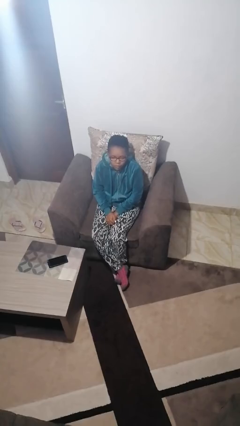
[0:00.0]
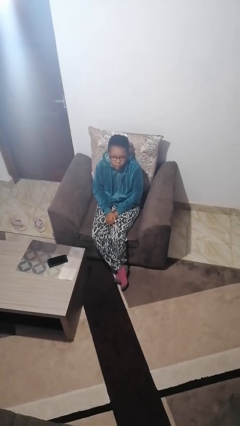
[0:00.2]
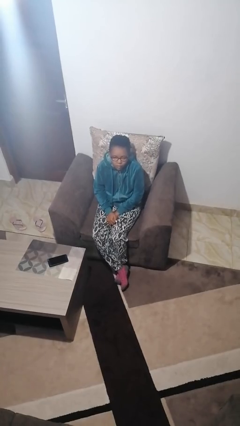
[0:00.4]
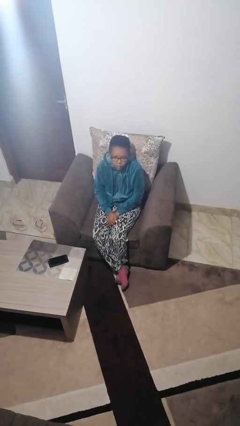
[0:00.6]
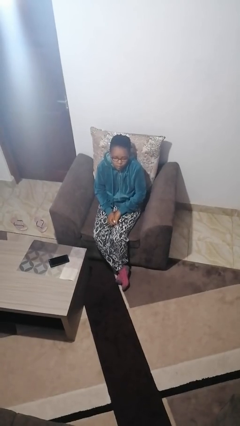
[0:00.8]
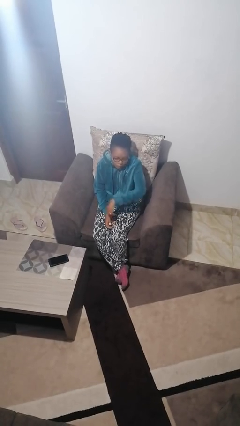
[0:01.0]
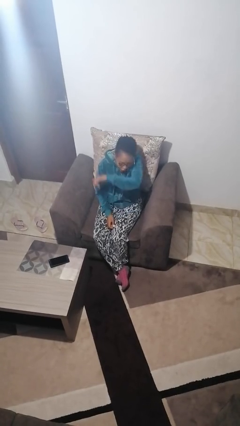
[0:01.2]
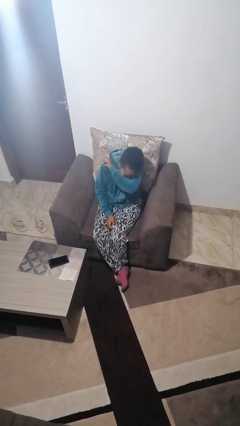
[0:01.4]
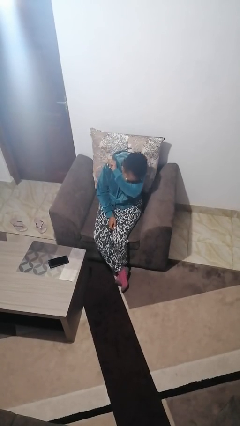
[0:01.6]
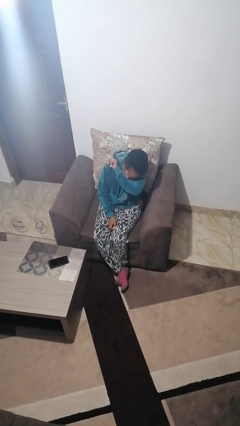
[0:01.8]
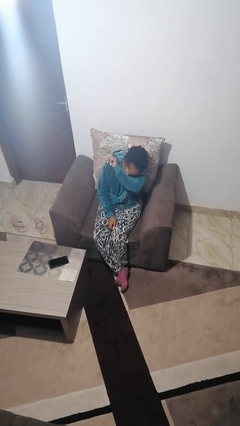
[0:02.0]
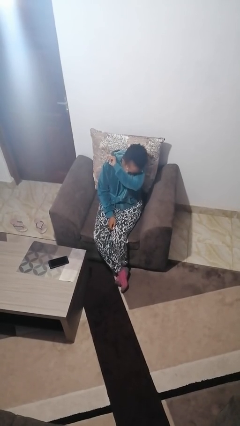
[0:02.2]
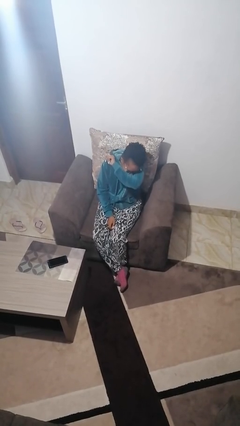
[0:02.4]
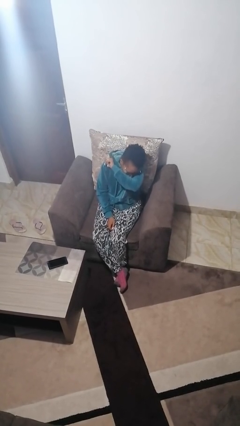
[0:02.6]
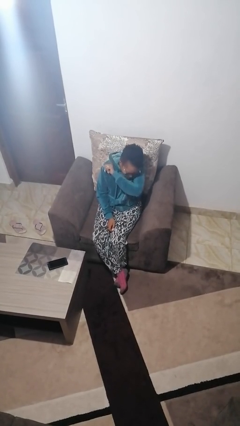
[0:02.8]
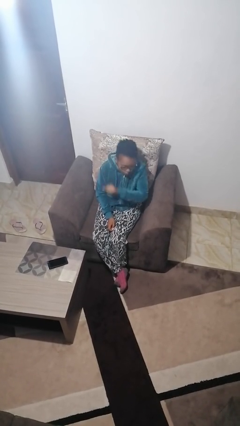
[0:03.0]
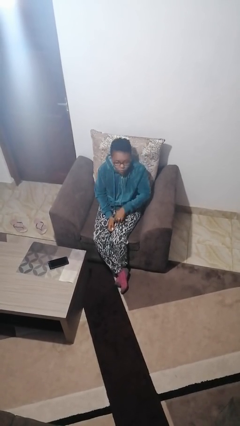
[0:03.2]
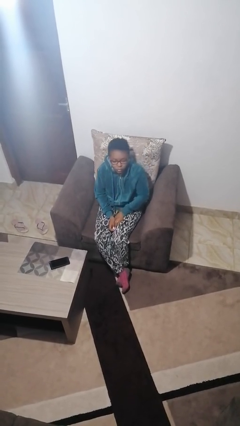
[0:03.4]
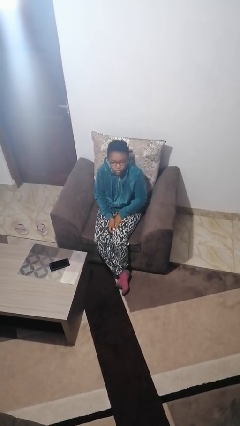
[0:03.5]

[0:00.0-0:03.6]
person sneezes into arm

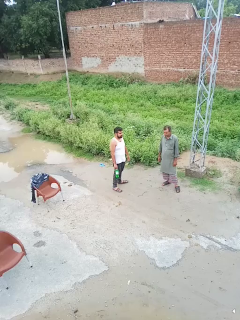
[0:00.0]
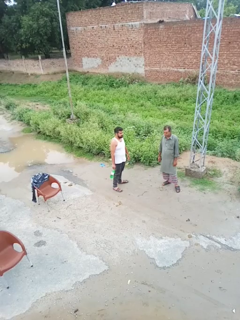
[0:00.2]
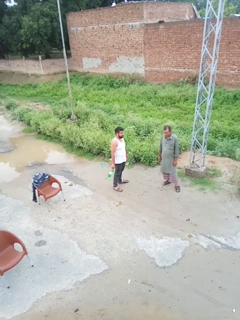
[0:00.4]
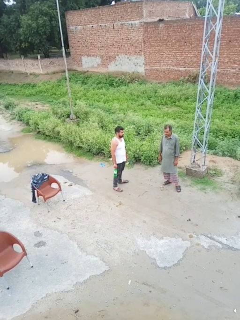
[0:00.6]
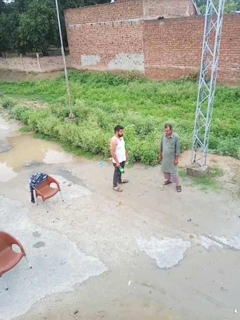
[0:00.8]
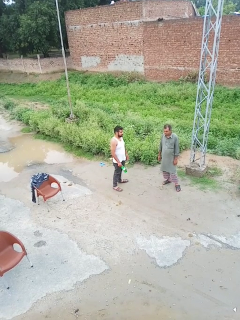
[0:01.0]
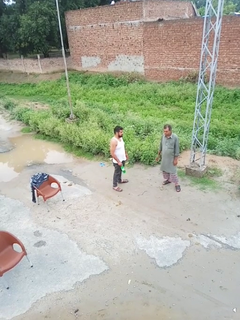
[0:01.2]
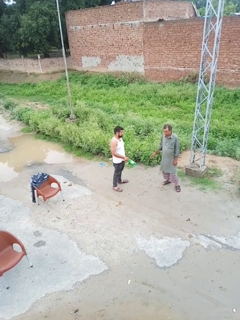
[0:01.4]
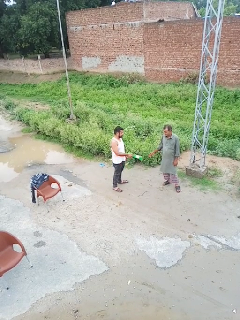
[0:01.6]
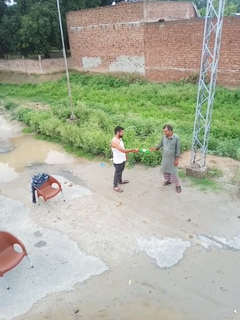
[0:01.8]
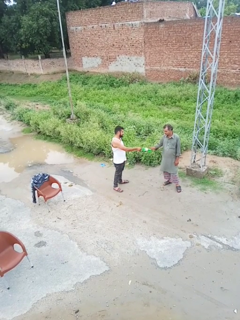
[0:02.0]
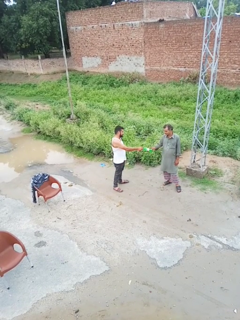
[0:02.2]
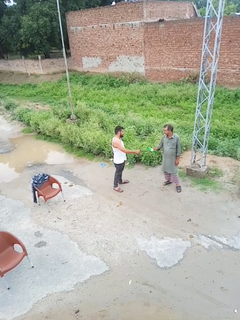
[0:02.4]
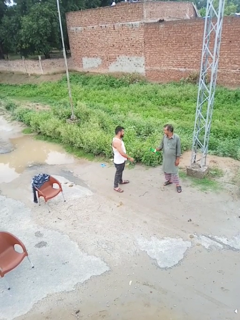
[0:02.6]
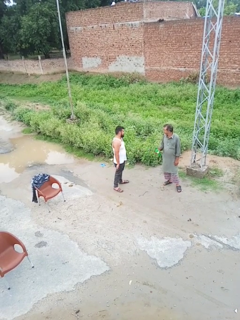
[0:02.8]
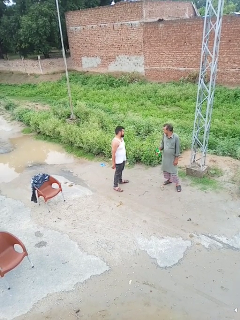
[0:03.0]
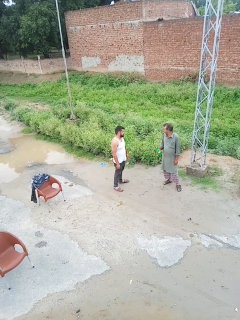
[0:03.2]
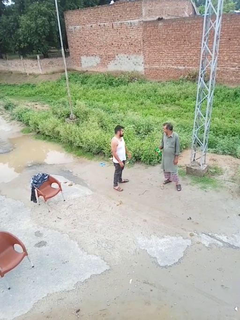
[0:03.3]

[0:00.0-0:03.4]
person transfers object to person

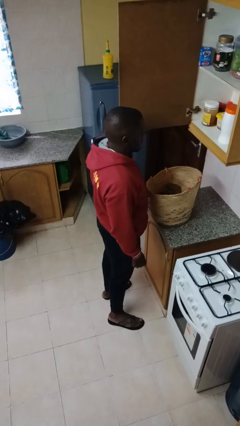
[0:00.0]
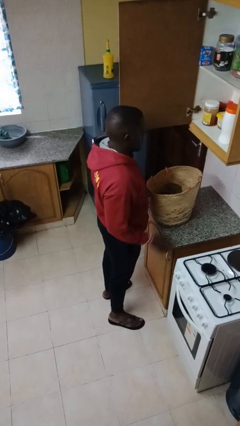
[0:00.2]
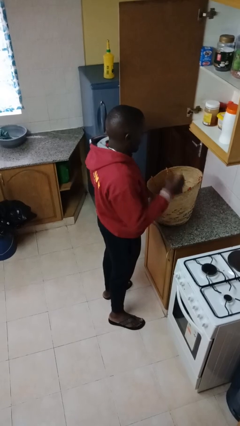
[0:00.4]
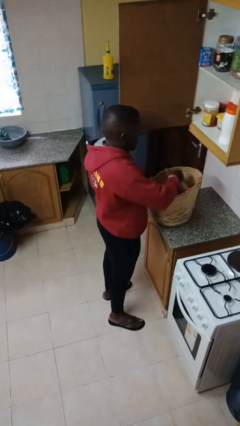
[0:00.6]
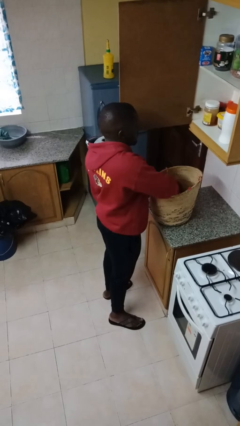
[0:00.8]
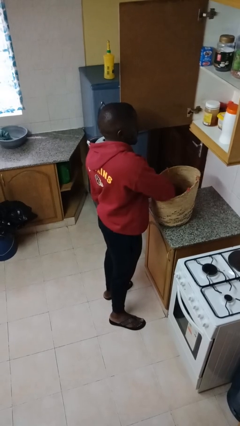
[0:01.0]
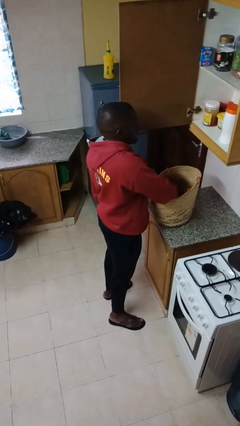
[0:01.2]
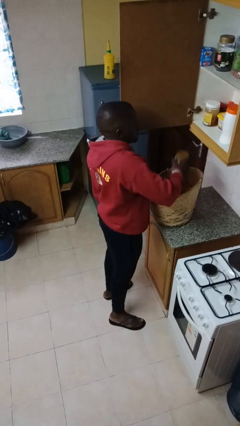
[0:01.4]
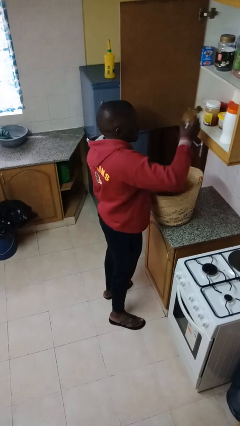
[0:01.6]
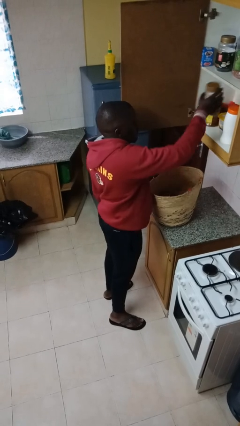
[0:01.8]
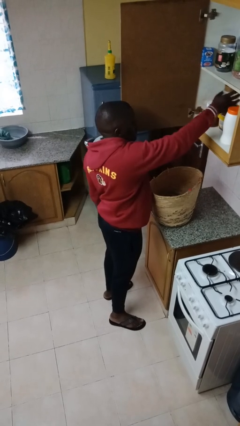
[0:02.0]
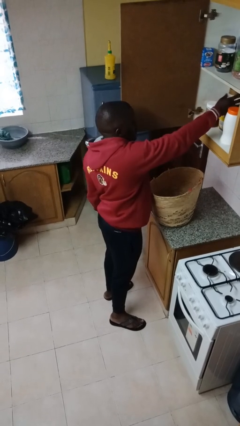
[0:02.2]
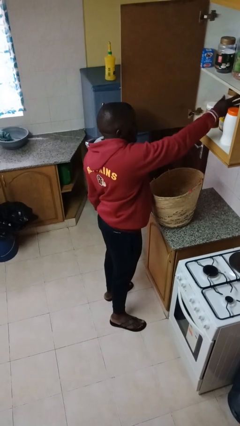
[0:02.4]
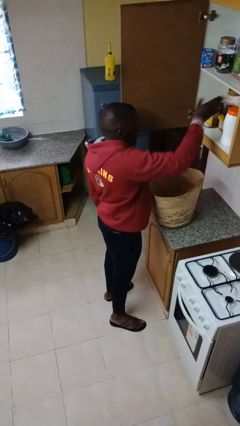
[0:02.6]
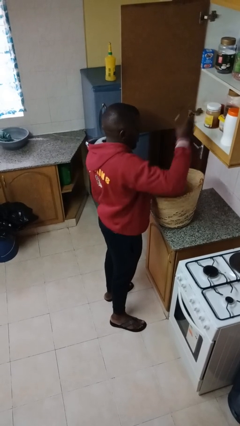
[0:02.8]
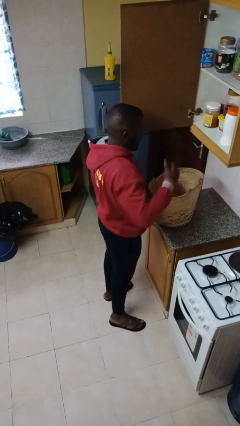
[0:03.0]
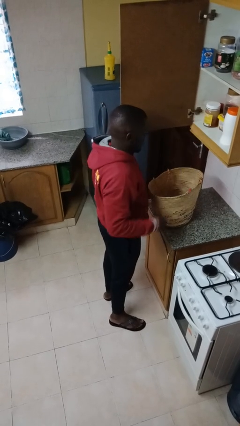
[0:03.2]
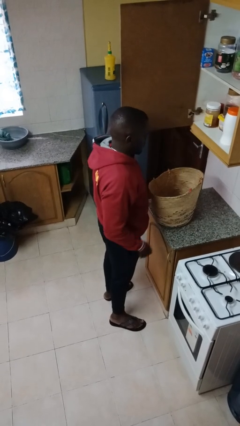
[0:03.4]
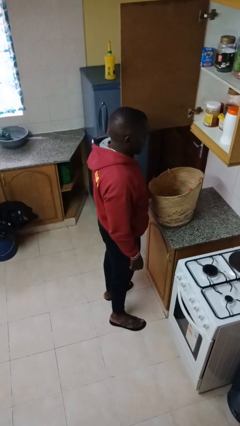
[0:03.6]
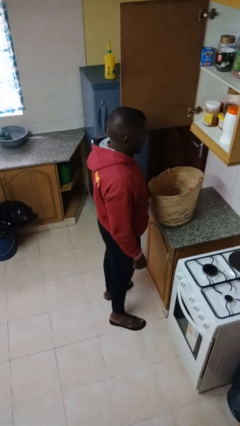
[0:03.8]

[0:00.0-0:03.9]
person loads groceries into cabinet

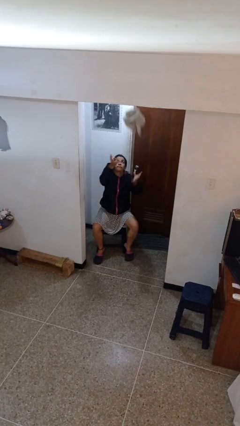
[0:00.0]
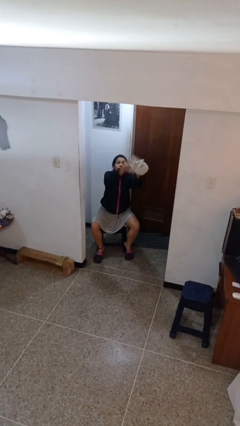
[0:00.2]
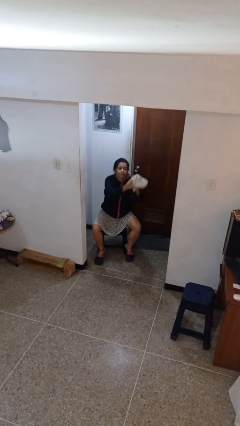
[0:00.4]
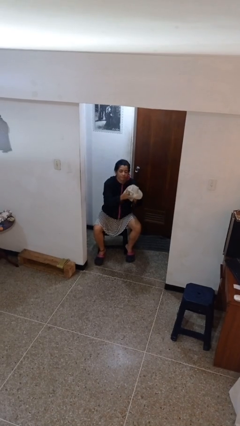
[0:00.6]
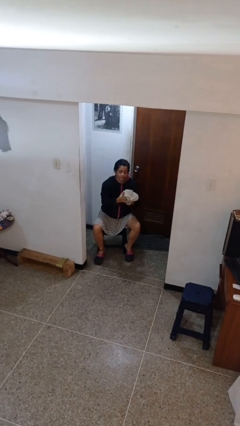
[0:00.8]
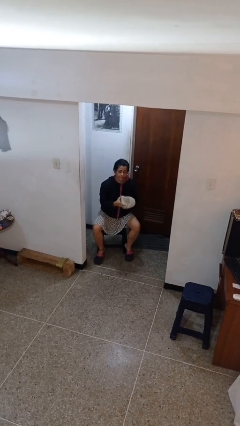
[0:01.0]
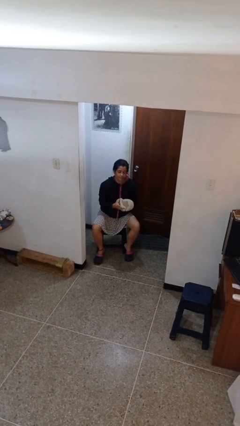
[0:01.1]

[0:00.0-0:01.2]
person catches dropped object

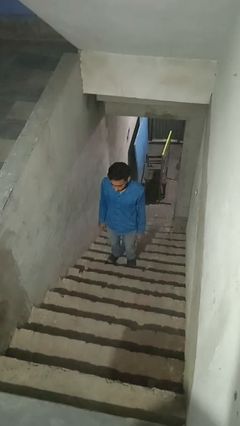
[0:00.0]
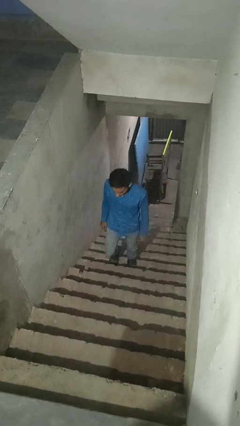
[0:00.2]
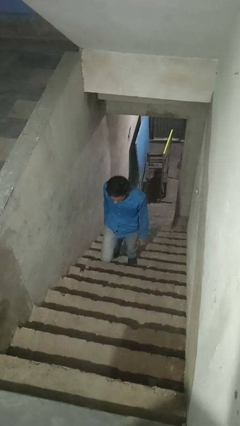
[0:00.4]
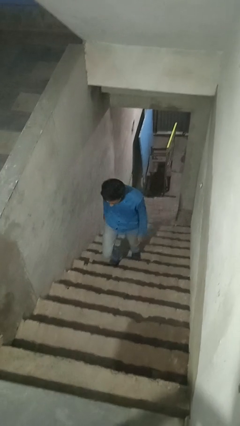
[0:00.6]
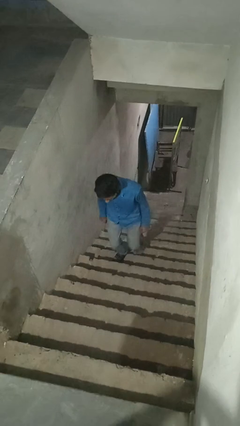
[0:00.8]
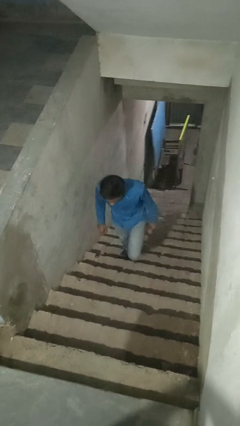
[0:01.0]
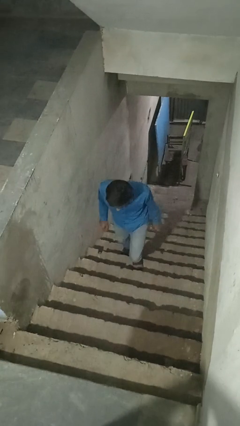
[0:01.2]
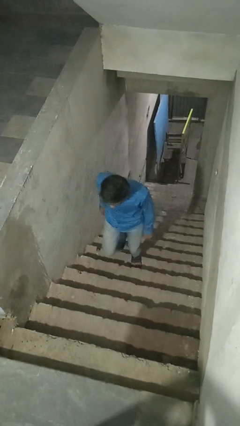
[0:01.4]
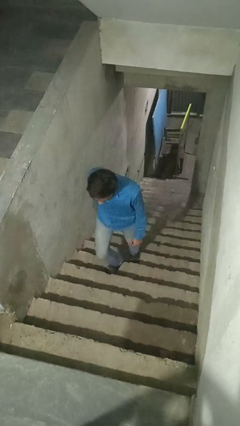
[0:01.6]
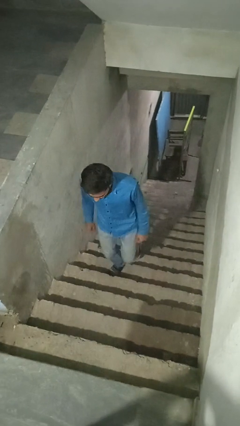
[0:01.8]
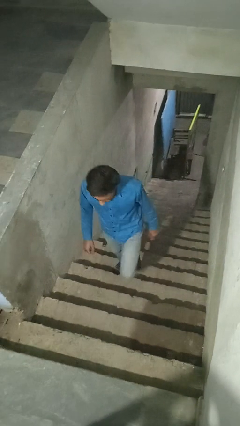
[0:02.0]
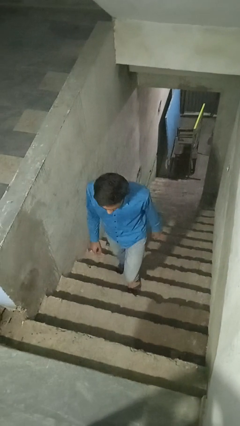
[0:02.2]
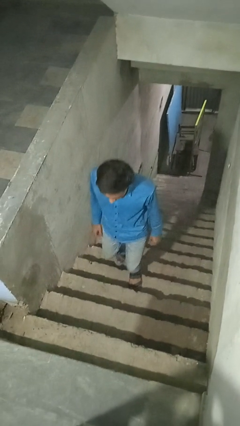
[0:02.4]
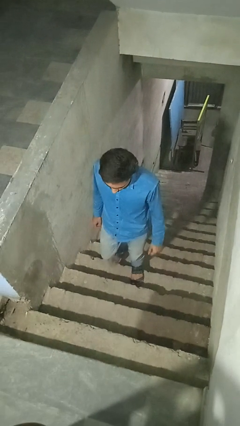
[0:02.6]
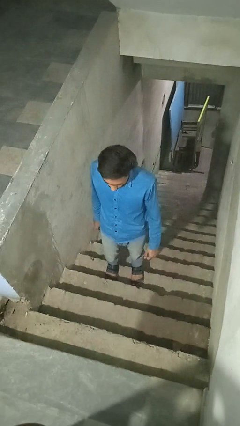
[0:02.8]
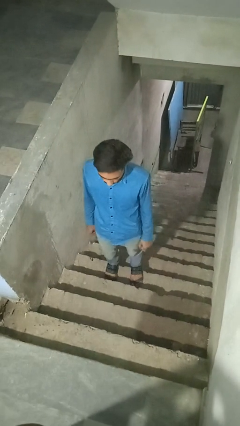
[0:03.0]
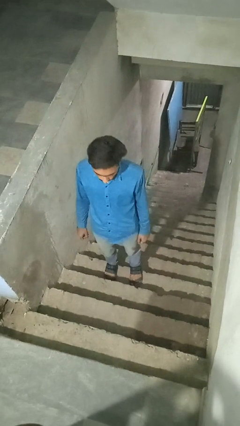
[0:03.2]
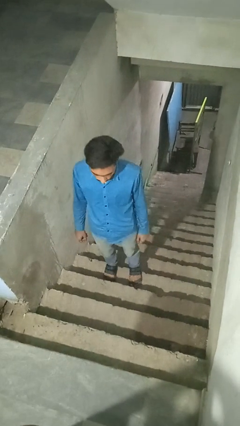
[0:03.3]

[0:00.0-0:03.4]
person climbs up stairs

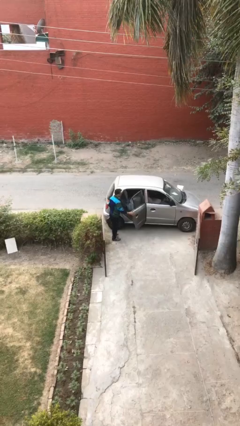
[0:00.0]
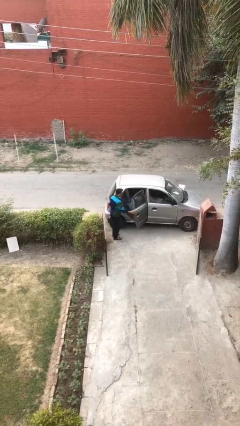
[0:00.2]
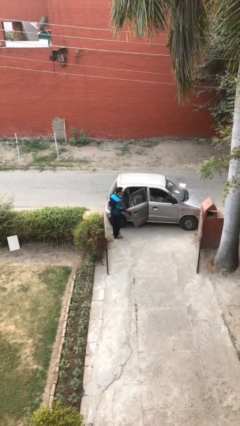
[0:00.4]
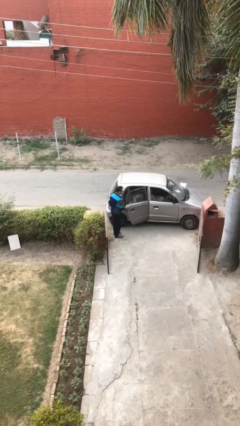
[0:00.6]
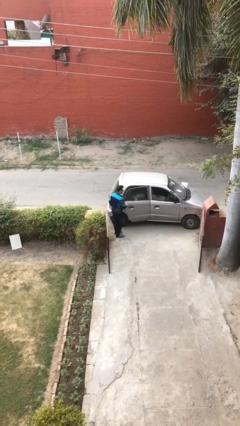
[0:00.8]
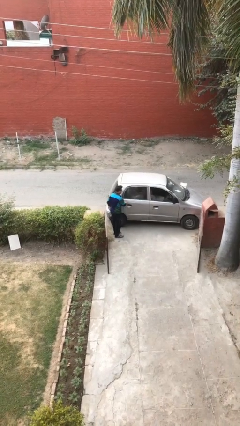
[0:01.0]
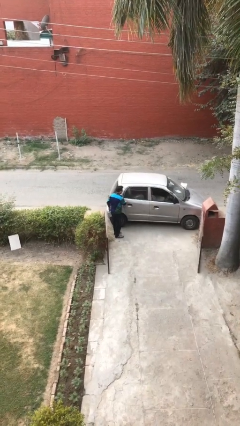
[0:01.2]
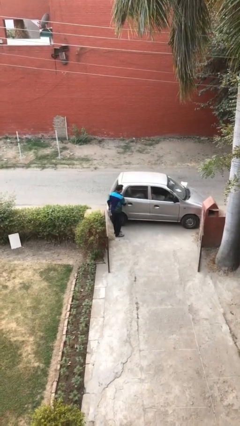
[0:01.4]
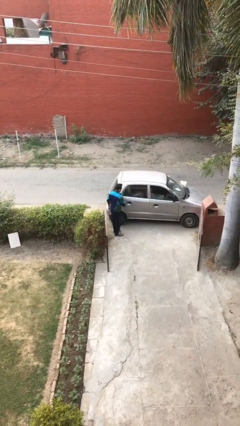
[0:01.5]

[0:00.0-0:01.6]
person closes car door

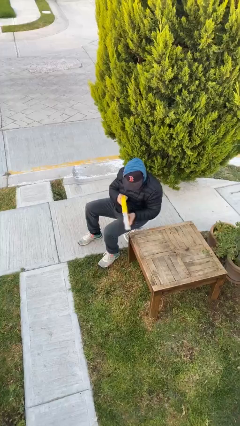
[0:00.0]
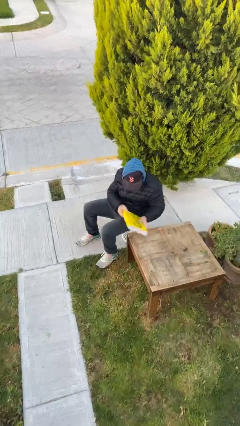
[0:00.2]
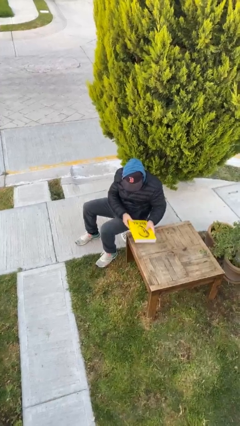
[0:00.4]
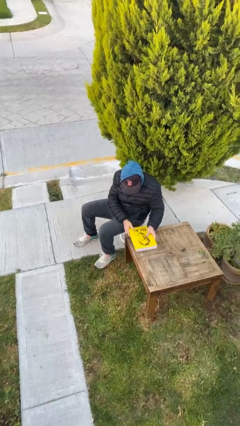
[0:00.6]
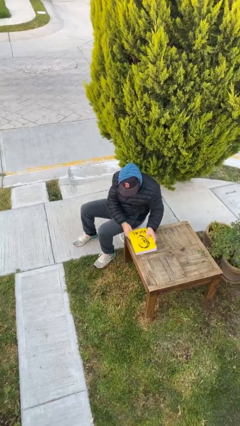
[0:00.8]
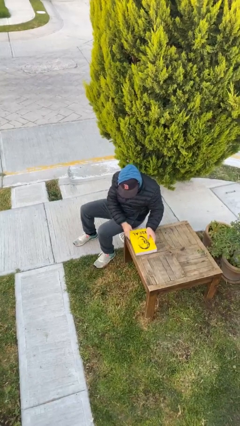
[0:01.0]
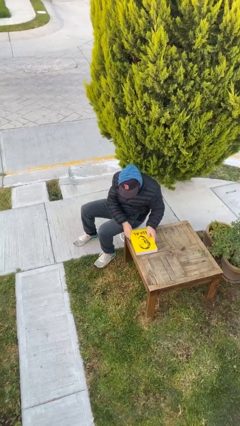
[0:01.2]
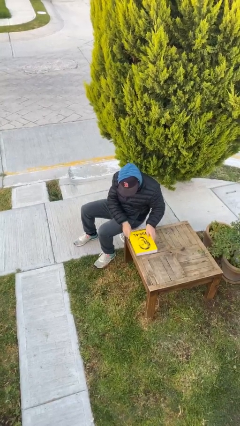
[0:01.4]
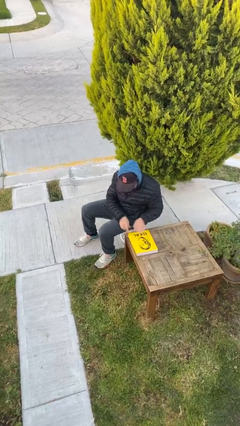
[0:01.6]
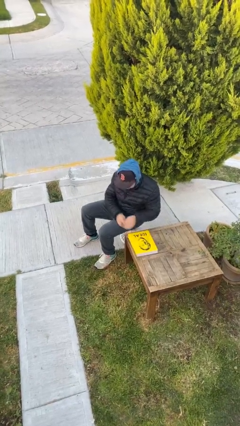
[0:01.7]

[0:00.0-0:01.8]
person puts down object on table
